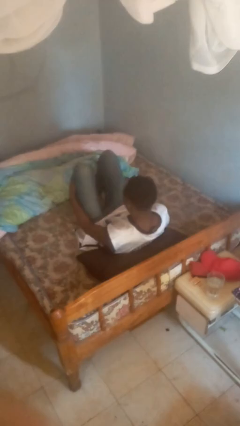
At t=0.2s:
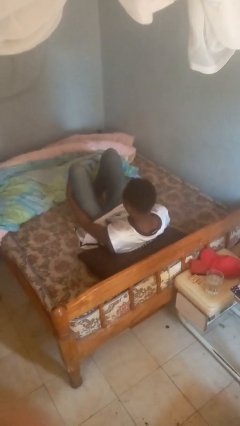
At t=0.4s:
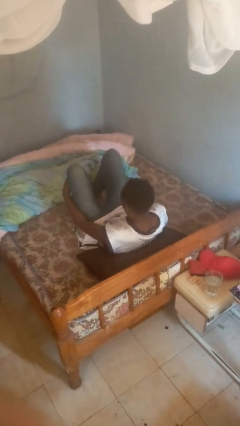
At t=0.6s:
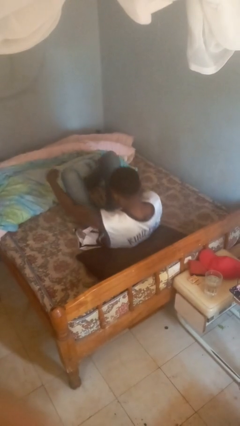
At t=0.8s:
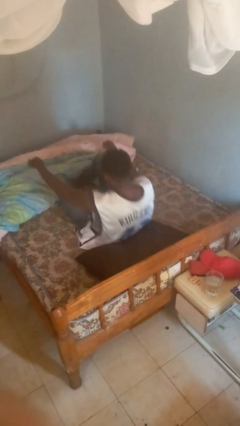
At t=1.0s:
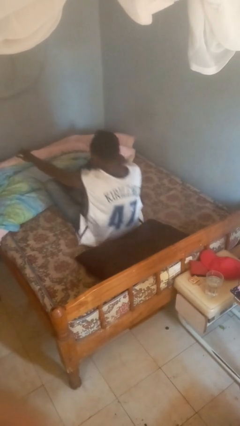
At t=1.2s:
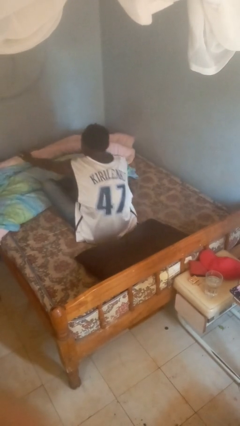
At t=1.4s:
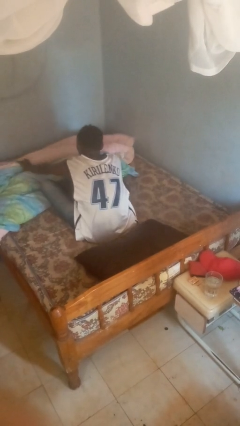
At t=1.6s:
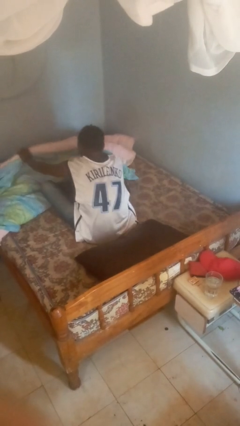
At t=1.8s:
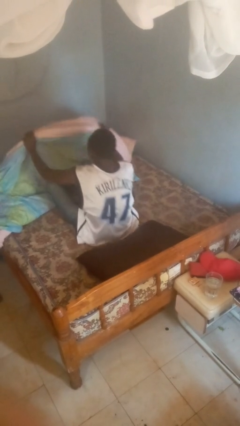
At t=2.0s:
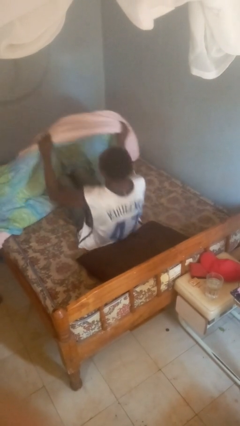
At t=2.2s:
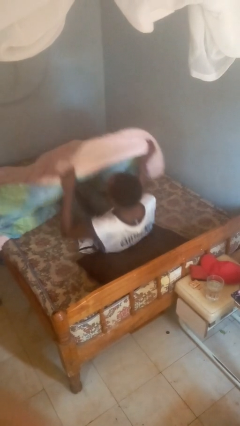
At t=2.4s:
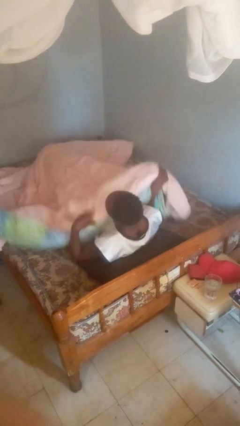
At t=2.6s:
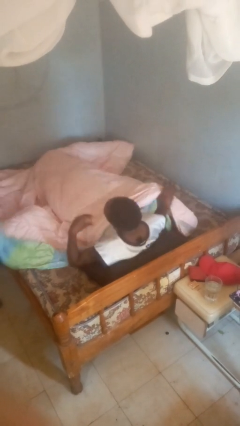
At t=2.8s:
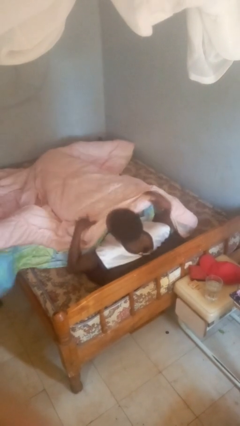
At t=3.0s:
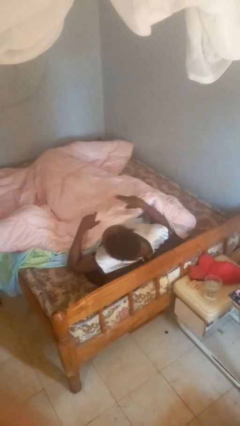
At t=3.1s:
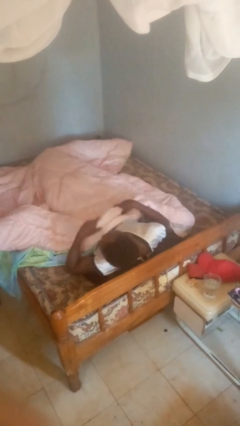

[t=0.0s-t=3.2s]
person covers with bedsheets

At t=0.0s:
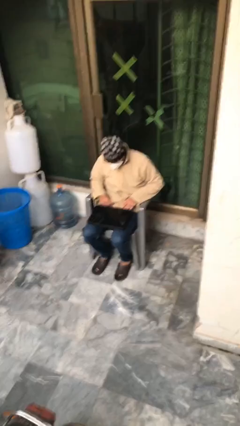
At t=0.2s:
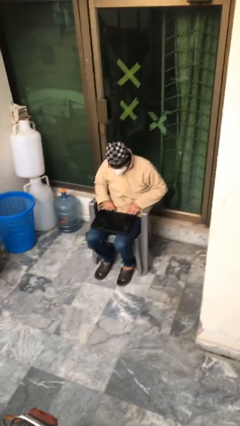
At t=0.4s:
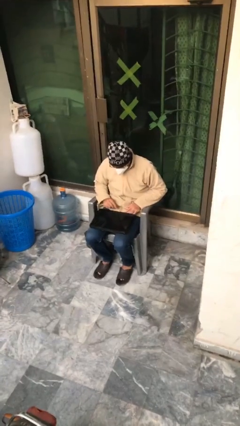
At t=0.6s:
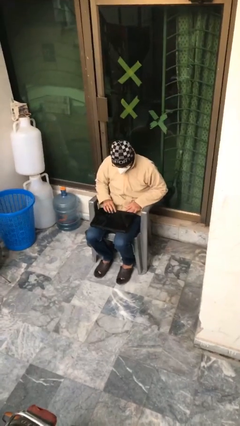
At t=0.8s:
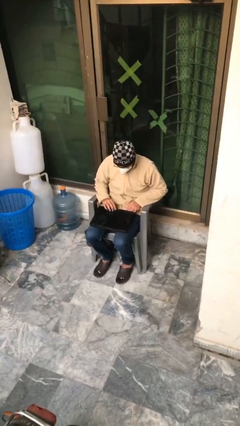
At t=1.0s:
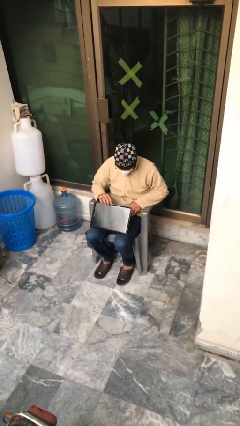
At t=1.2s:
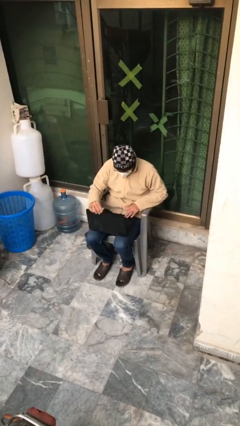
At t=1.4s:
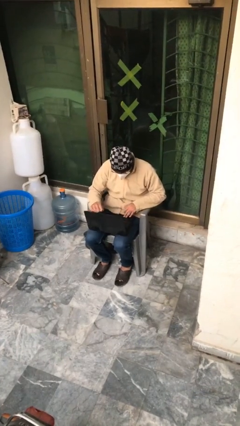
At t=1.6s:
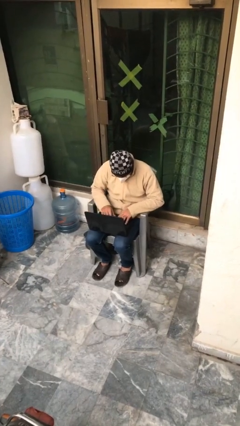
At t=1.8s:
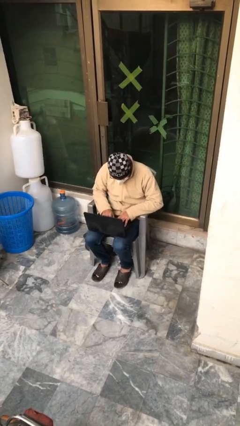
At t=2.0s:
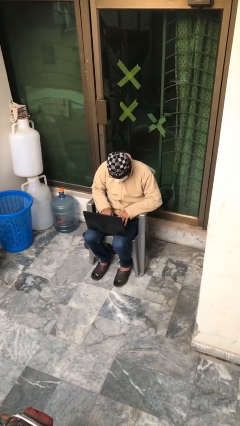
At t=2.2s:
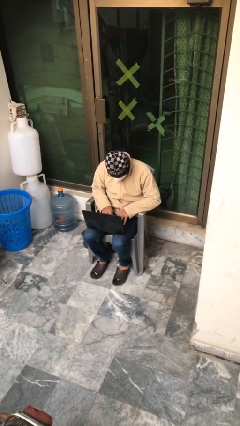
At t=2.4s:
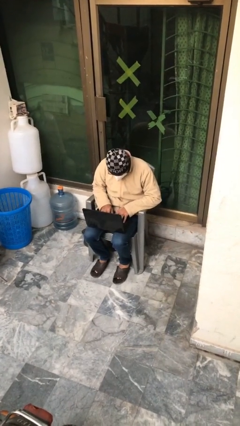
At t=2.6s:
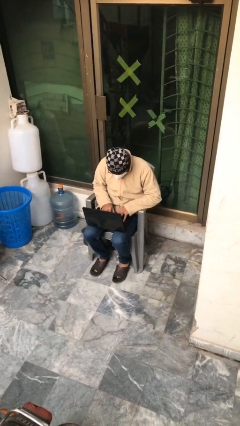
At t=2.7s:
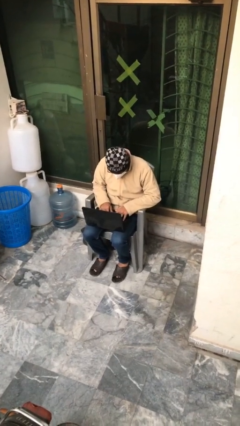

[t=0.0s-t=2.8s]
person interacts with laptop

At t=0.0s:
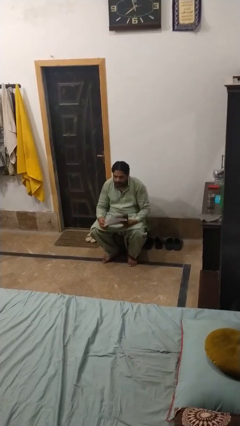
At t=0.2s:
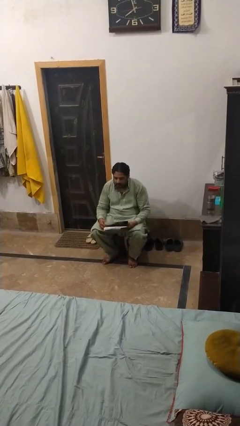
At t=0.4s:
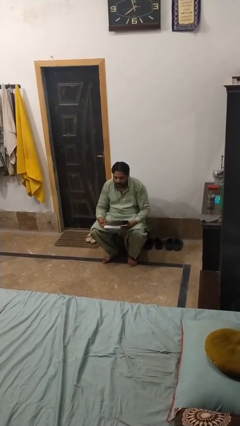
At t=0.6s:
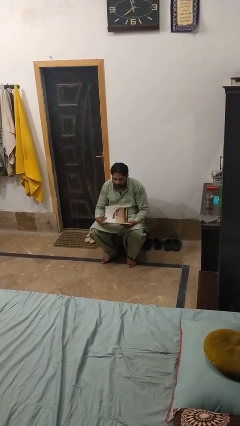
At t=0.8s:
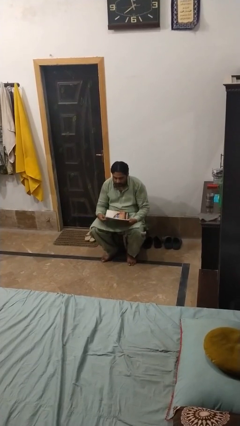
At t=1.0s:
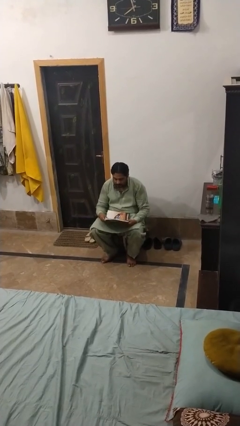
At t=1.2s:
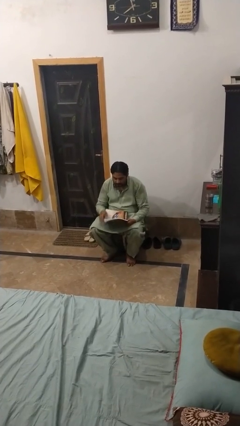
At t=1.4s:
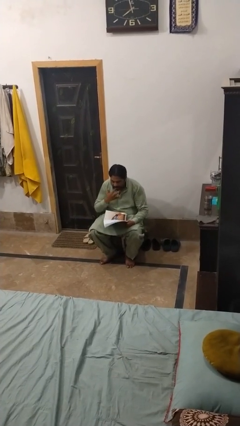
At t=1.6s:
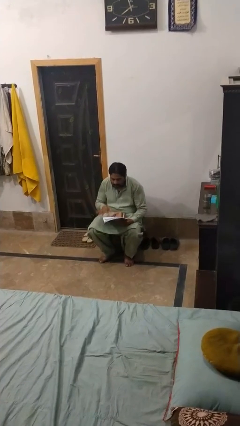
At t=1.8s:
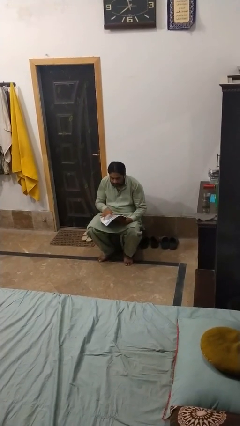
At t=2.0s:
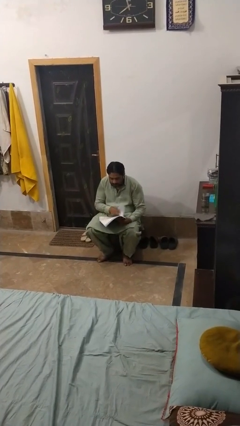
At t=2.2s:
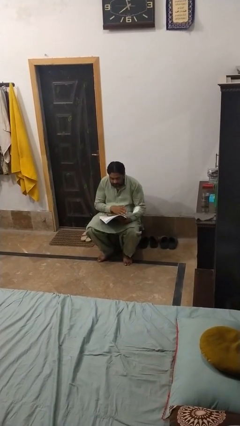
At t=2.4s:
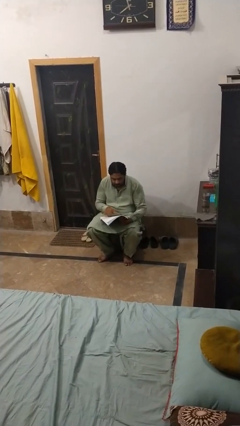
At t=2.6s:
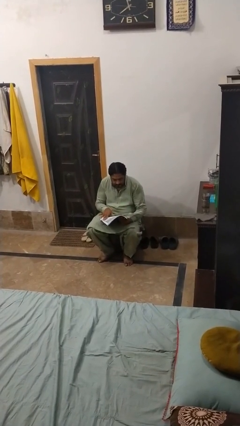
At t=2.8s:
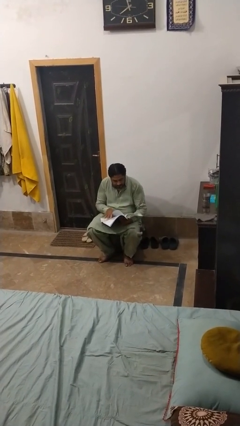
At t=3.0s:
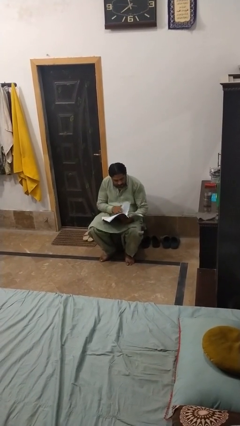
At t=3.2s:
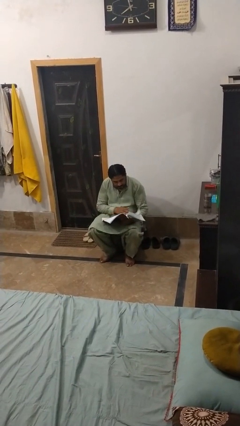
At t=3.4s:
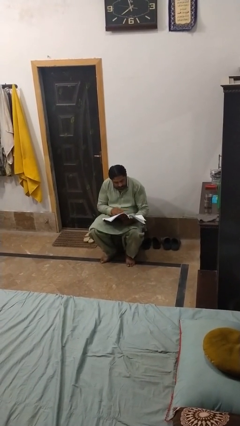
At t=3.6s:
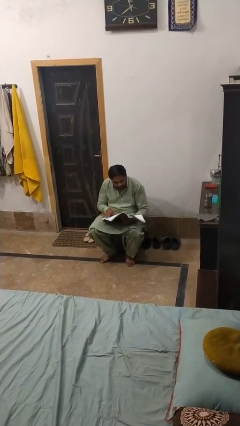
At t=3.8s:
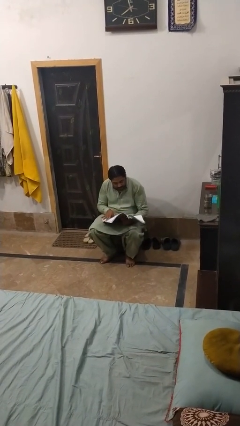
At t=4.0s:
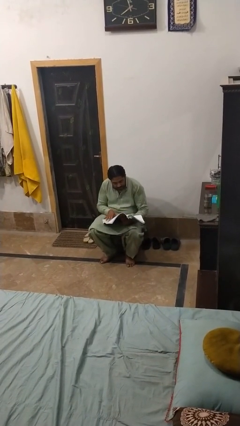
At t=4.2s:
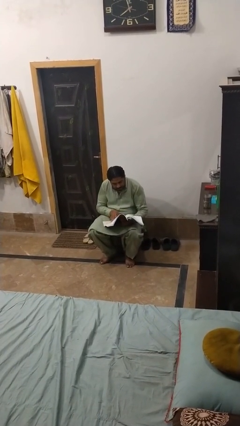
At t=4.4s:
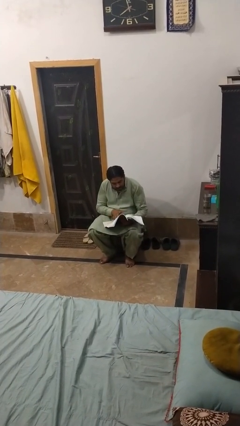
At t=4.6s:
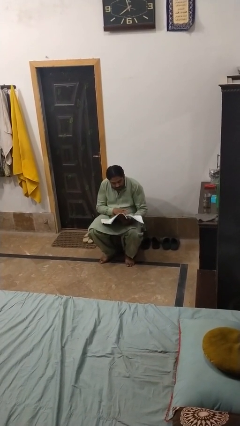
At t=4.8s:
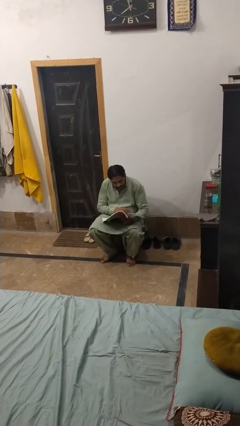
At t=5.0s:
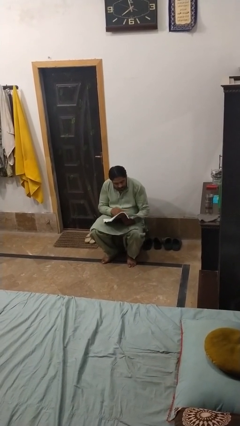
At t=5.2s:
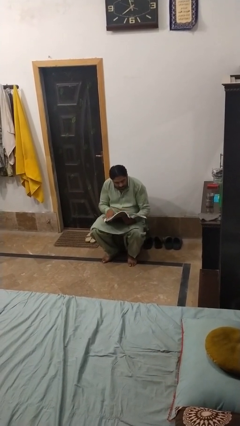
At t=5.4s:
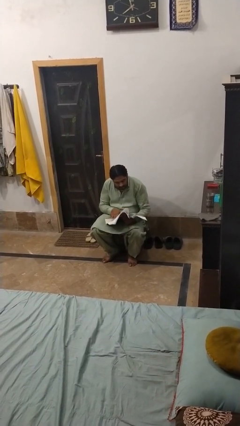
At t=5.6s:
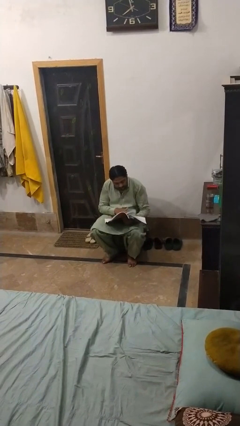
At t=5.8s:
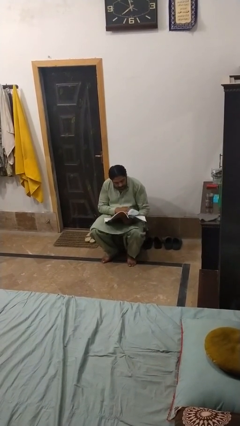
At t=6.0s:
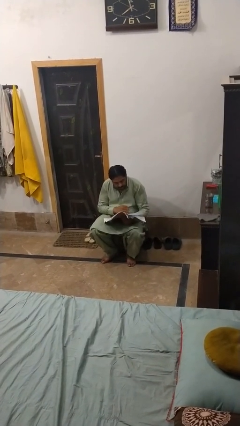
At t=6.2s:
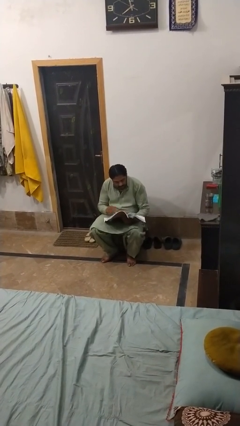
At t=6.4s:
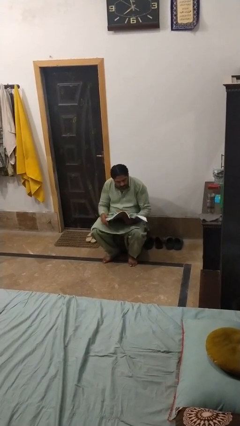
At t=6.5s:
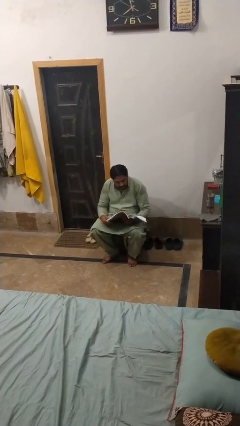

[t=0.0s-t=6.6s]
person reads book

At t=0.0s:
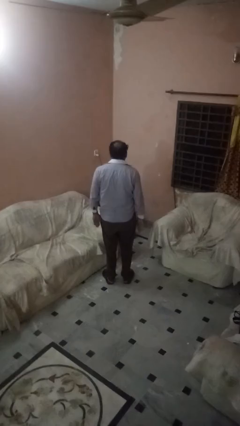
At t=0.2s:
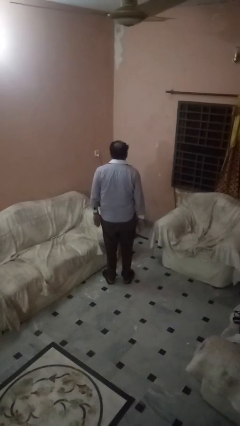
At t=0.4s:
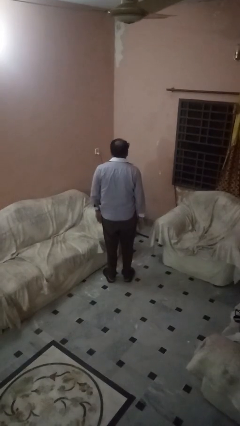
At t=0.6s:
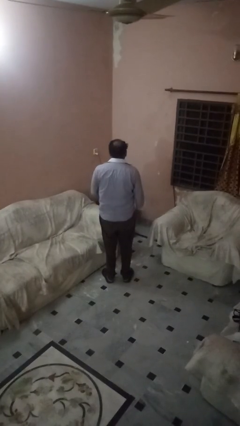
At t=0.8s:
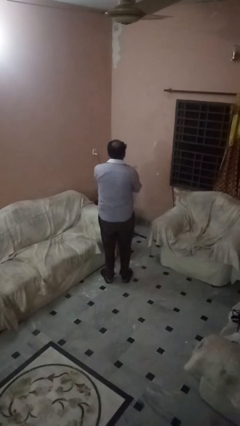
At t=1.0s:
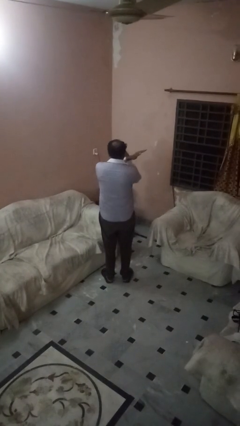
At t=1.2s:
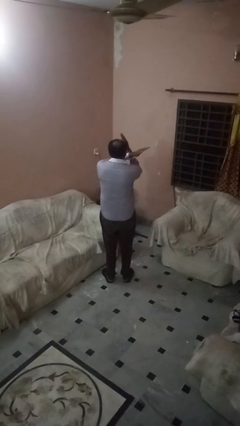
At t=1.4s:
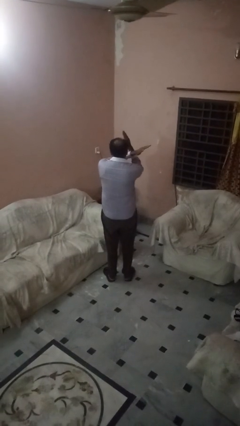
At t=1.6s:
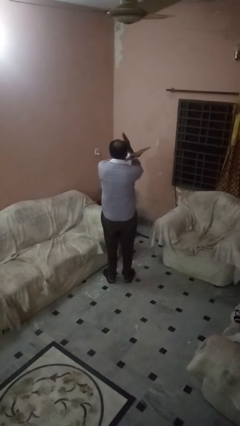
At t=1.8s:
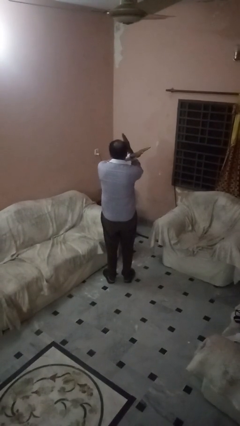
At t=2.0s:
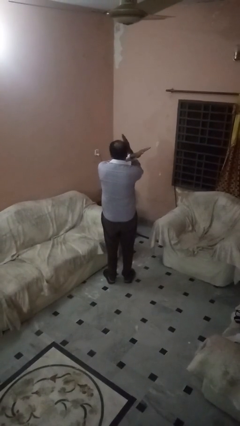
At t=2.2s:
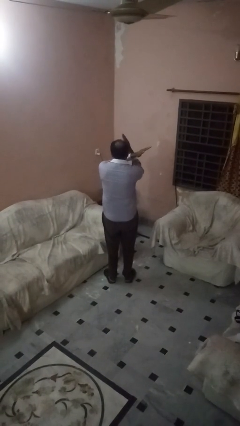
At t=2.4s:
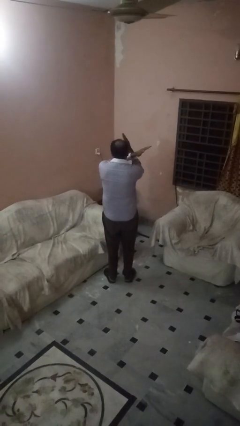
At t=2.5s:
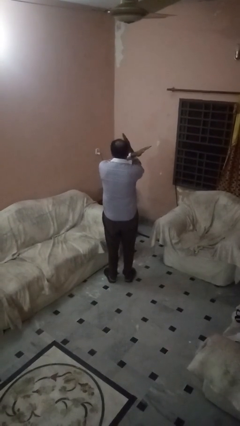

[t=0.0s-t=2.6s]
person gestures arms x

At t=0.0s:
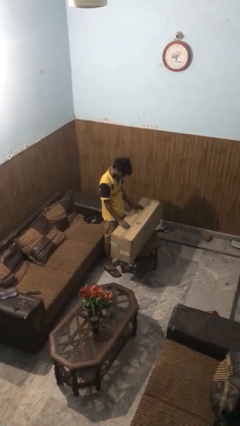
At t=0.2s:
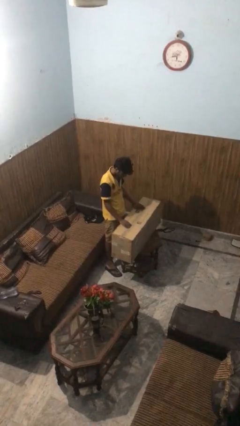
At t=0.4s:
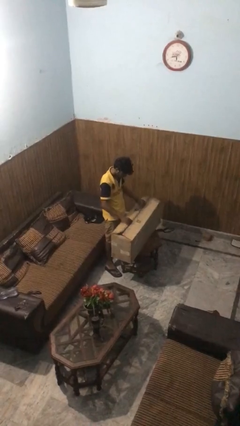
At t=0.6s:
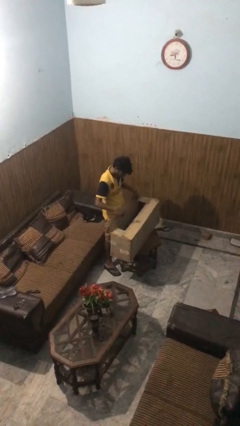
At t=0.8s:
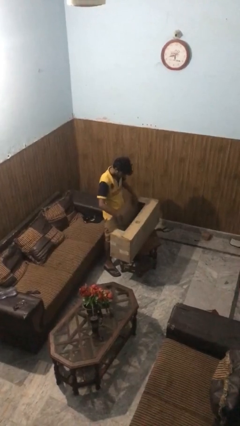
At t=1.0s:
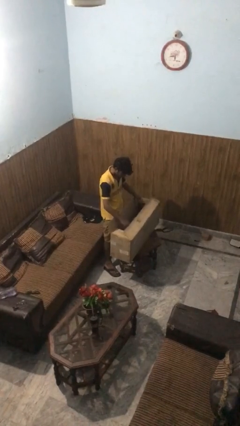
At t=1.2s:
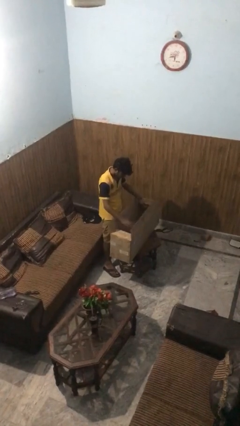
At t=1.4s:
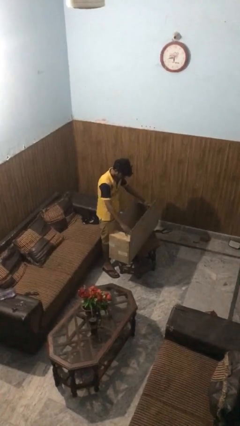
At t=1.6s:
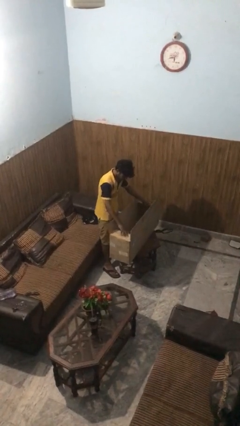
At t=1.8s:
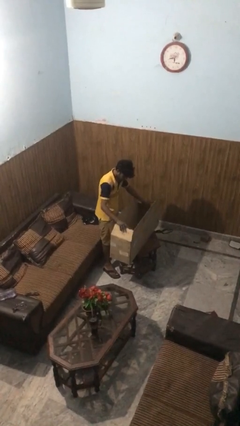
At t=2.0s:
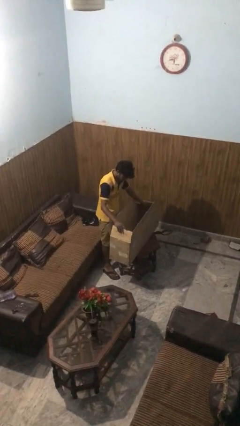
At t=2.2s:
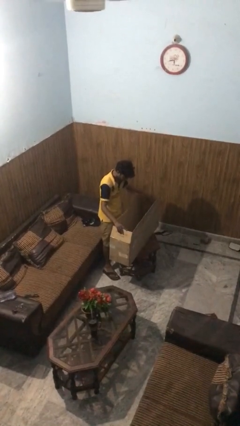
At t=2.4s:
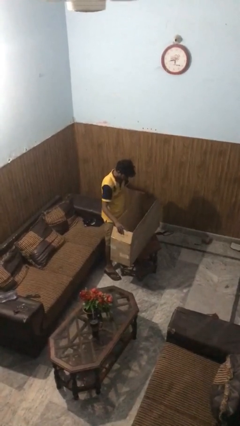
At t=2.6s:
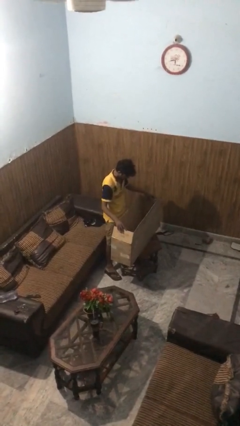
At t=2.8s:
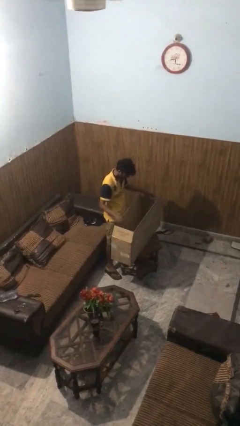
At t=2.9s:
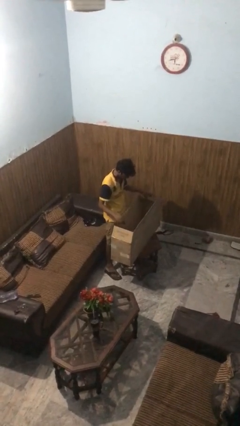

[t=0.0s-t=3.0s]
person opens box
